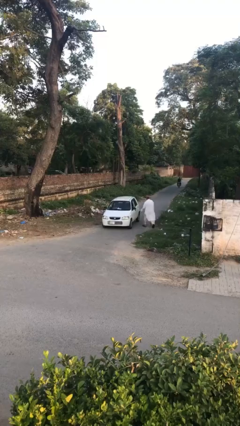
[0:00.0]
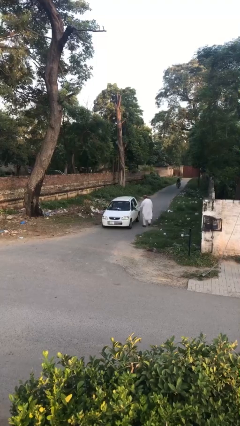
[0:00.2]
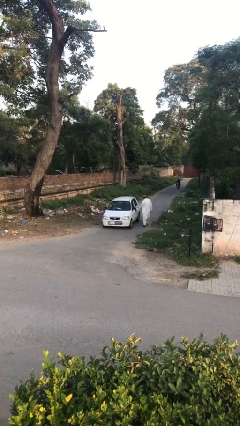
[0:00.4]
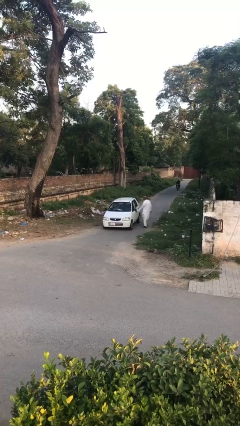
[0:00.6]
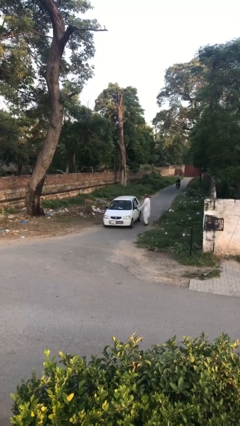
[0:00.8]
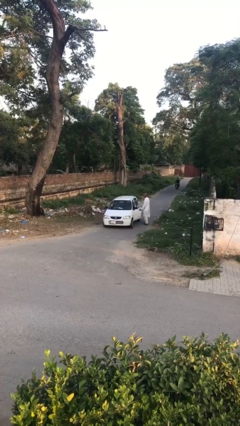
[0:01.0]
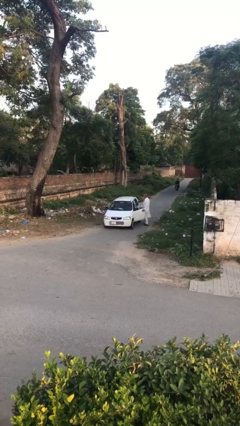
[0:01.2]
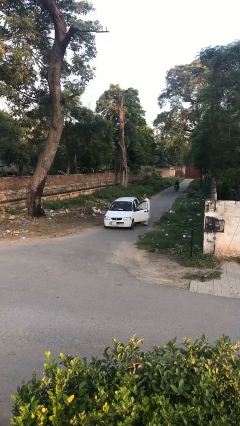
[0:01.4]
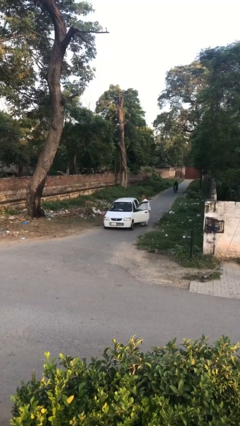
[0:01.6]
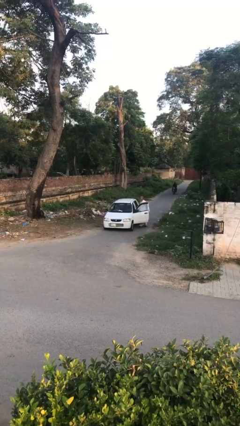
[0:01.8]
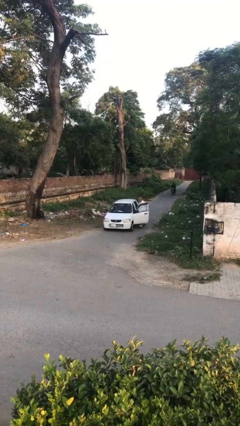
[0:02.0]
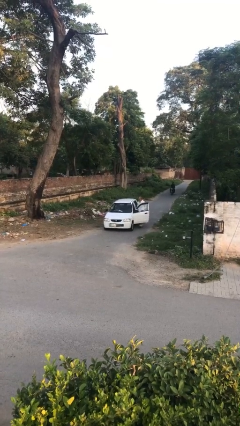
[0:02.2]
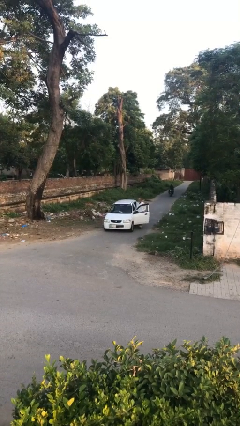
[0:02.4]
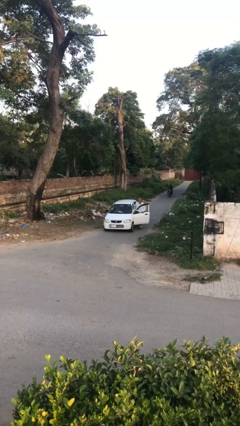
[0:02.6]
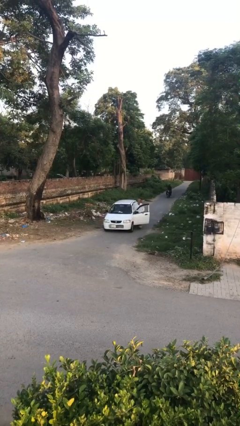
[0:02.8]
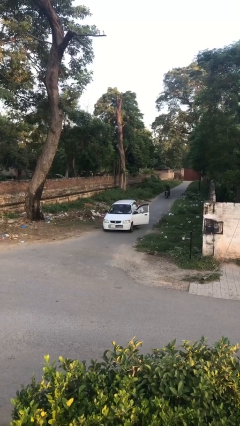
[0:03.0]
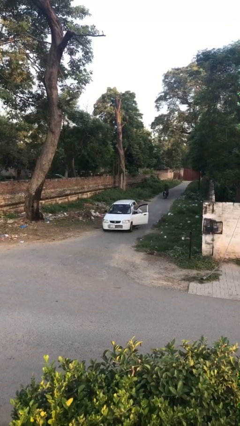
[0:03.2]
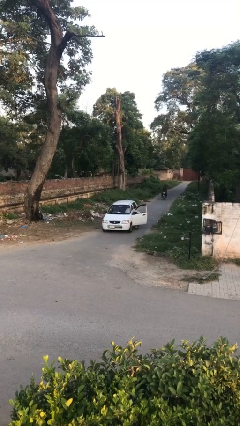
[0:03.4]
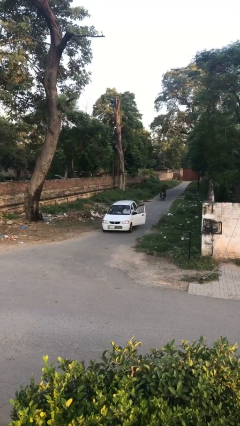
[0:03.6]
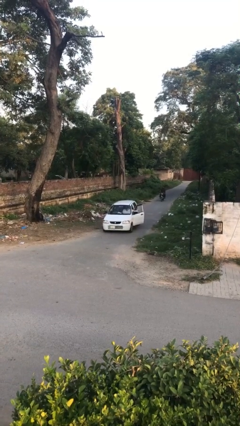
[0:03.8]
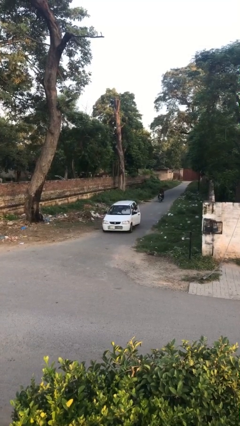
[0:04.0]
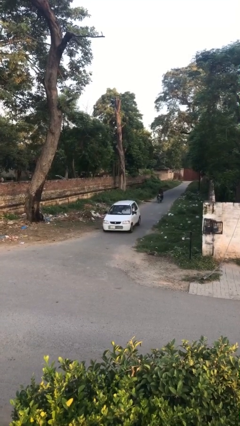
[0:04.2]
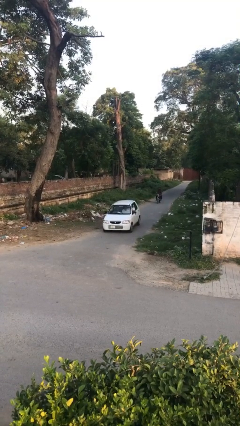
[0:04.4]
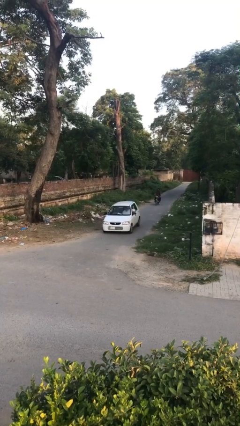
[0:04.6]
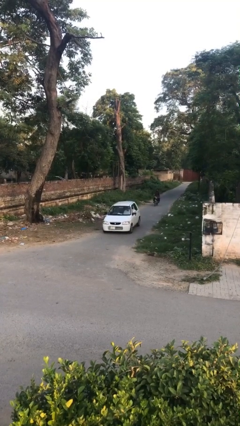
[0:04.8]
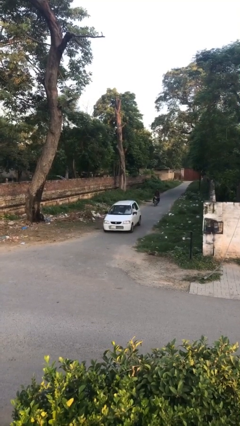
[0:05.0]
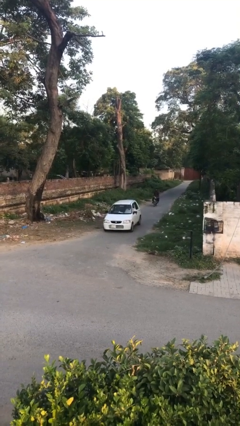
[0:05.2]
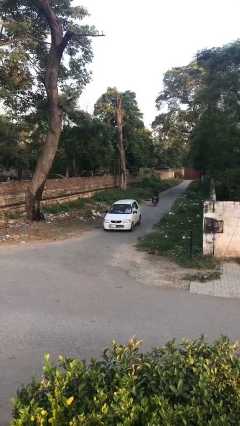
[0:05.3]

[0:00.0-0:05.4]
car picks up person

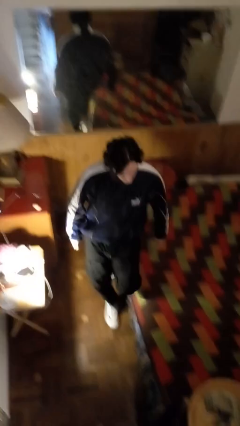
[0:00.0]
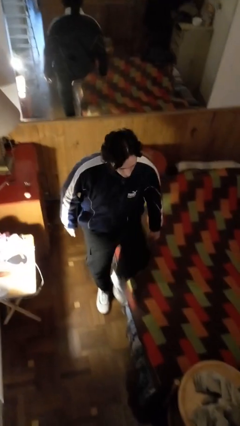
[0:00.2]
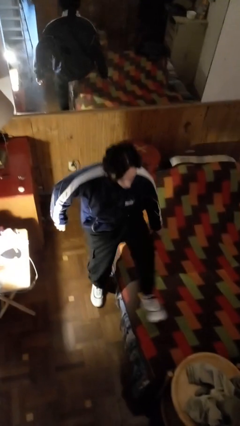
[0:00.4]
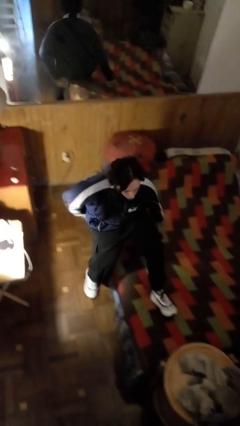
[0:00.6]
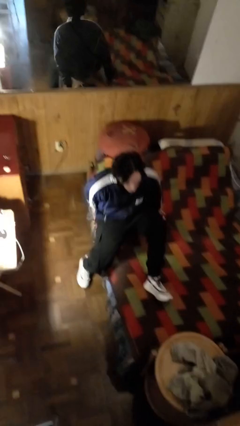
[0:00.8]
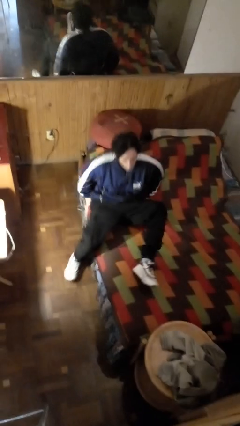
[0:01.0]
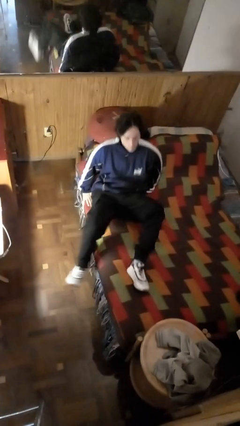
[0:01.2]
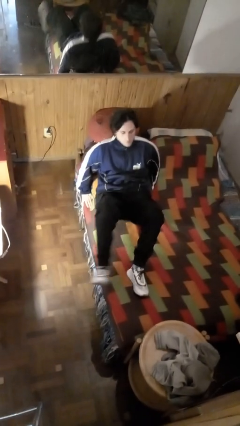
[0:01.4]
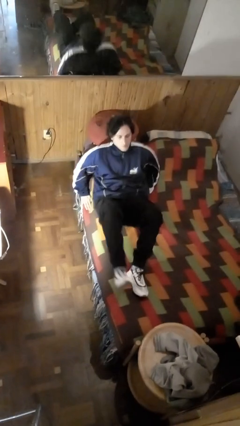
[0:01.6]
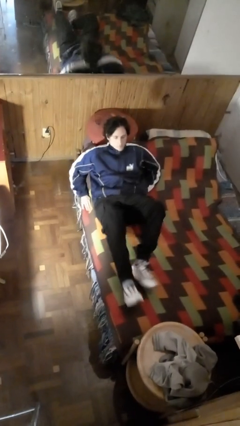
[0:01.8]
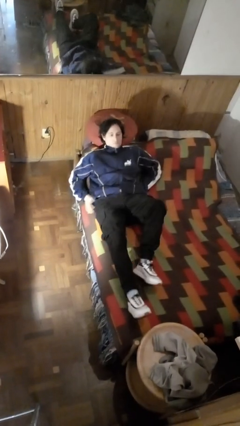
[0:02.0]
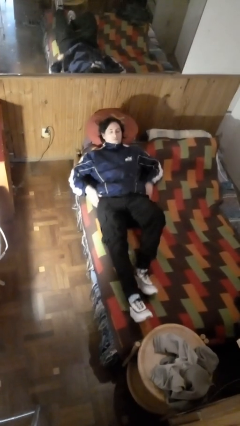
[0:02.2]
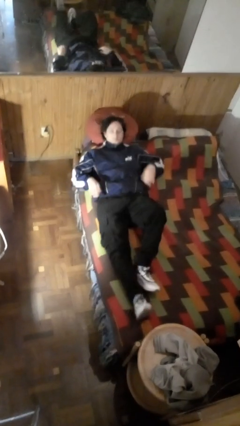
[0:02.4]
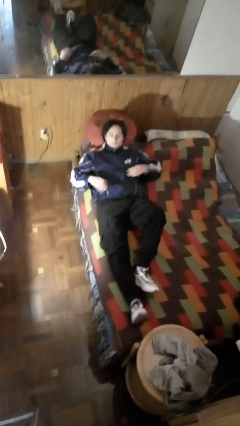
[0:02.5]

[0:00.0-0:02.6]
person lies down on bed

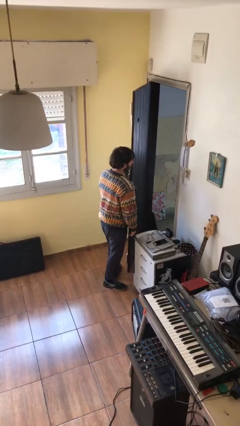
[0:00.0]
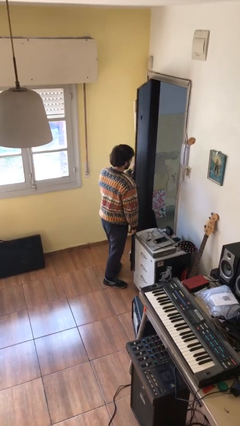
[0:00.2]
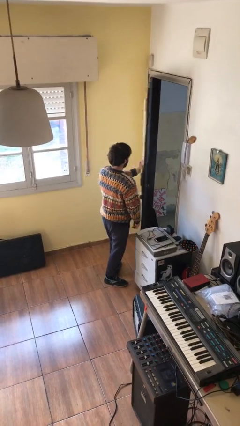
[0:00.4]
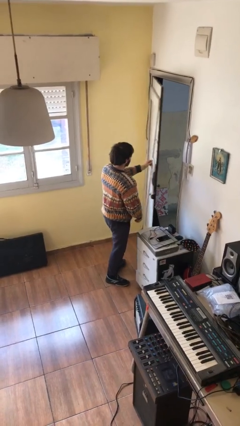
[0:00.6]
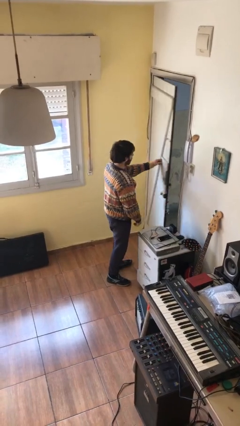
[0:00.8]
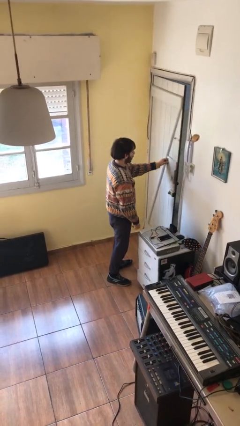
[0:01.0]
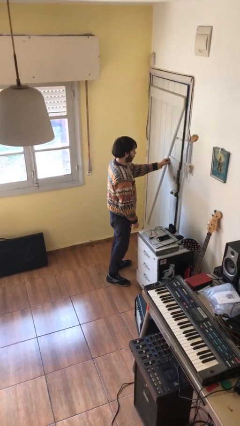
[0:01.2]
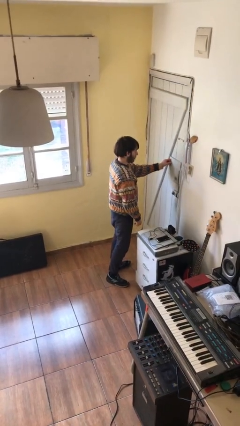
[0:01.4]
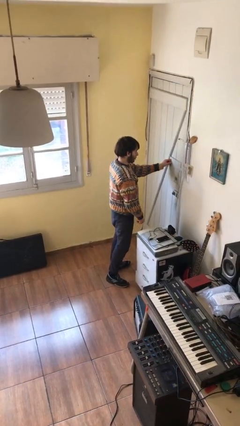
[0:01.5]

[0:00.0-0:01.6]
person closes facility door

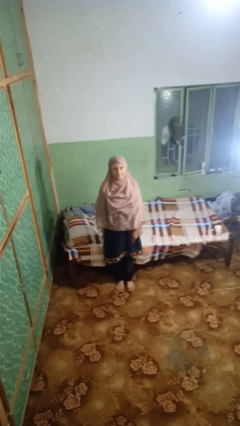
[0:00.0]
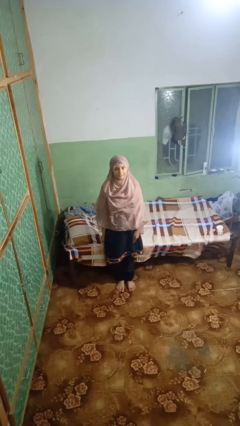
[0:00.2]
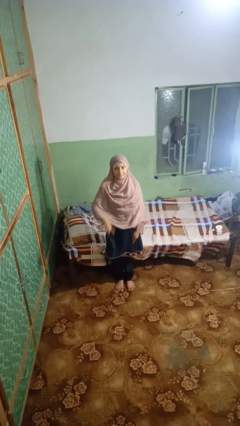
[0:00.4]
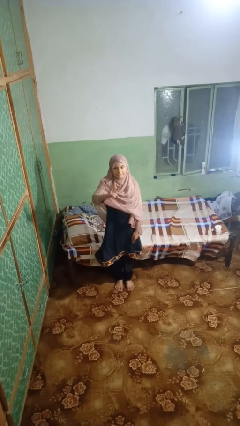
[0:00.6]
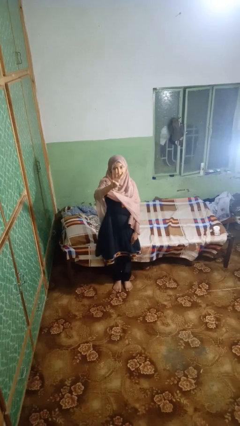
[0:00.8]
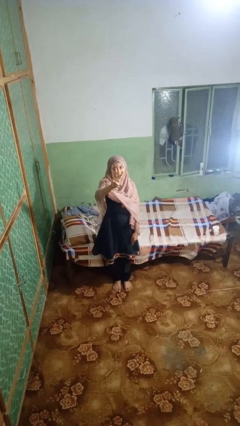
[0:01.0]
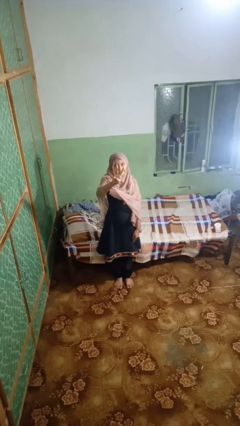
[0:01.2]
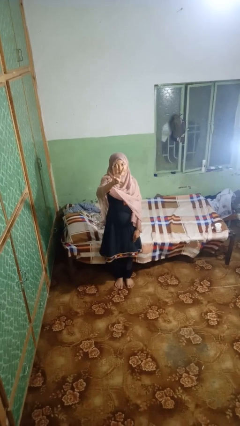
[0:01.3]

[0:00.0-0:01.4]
person gestures number four

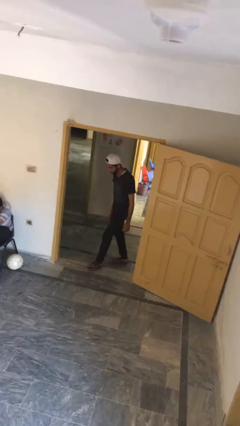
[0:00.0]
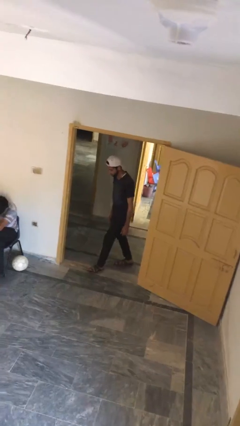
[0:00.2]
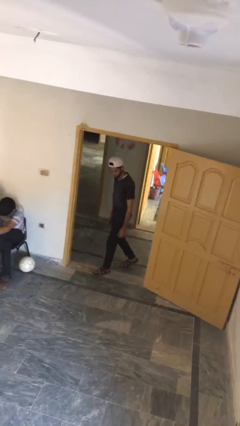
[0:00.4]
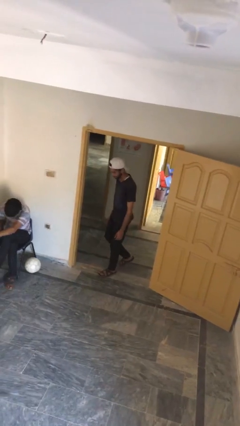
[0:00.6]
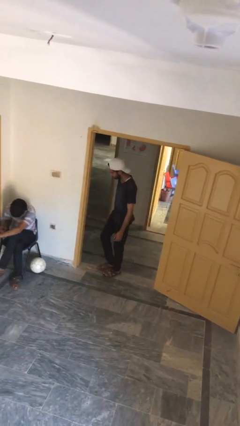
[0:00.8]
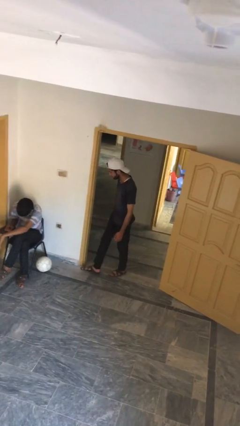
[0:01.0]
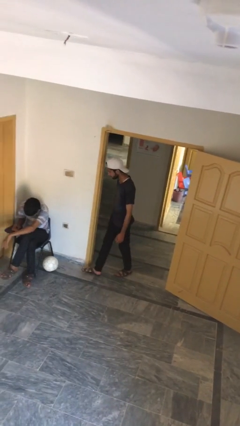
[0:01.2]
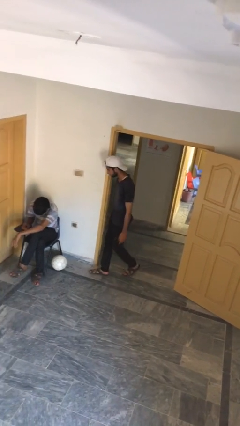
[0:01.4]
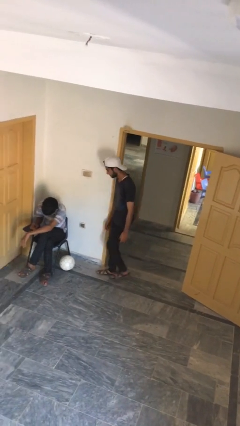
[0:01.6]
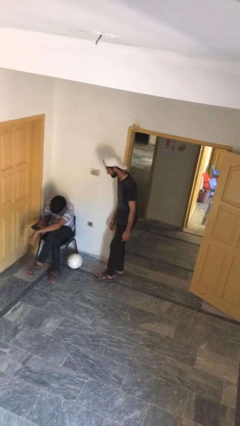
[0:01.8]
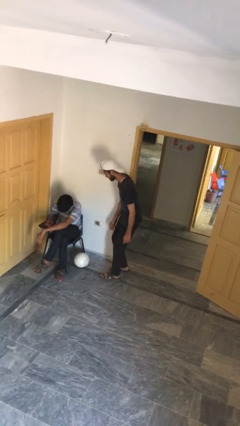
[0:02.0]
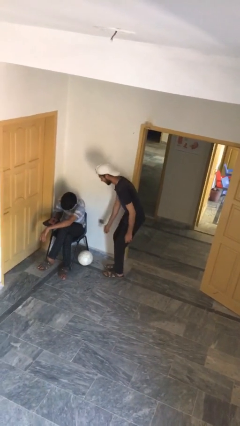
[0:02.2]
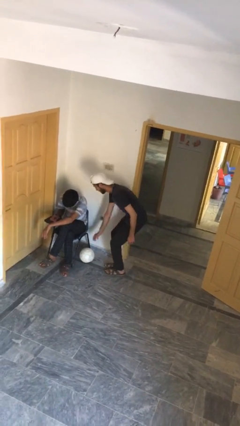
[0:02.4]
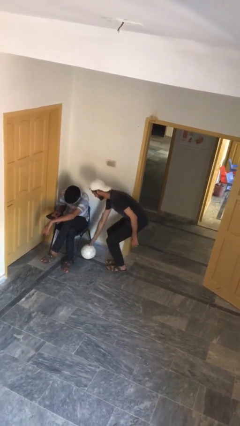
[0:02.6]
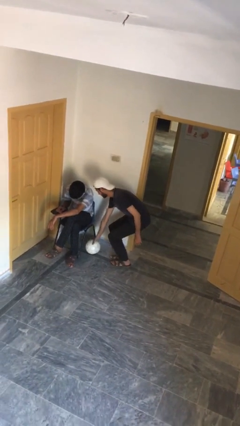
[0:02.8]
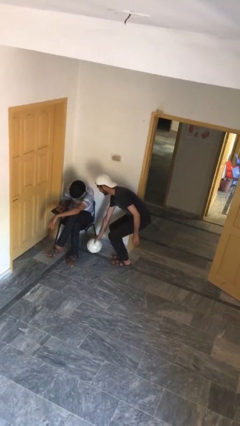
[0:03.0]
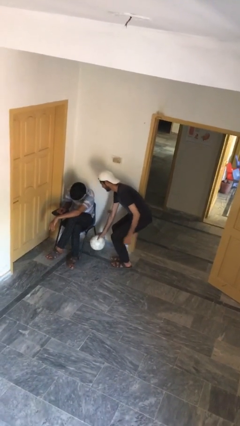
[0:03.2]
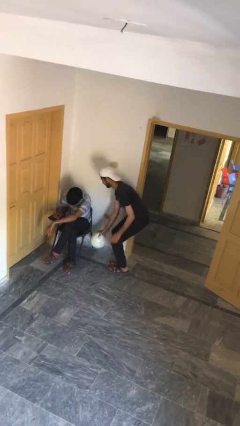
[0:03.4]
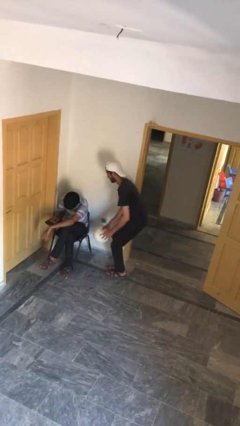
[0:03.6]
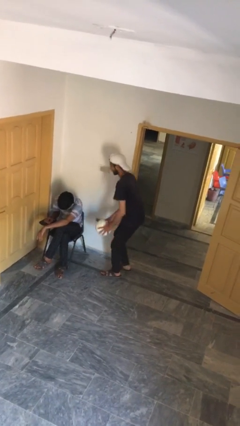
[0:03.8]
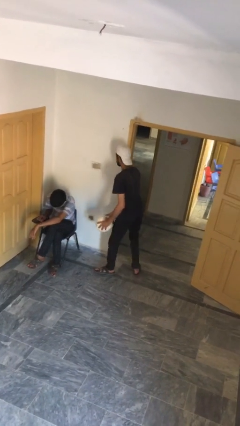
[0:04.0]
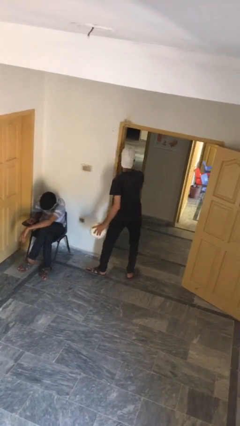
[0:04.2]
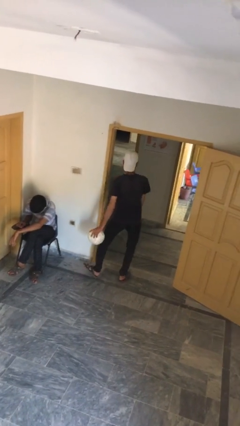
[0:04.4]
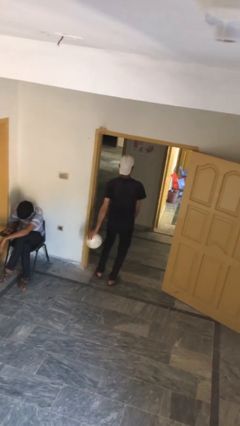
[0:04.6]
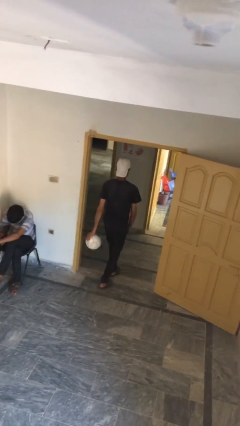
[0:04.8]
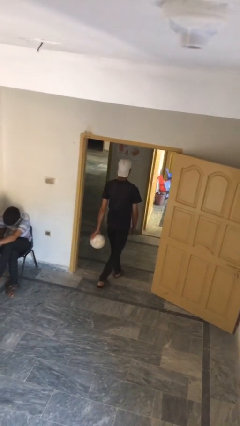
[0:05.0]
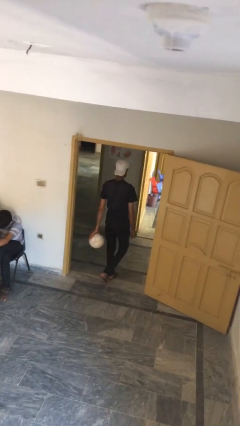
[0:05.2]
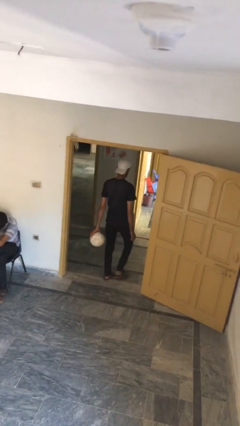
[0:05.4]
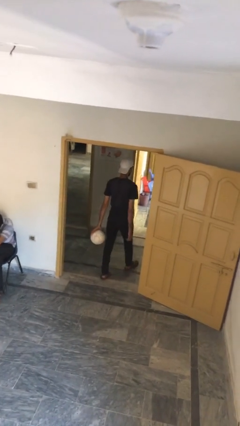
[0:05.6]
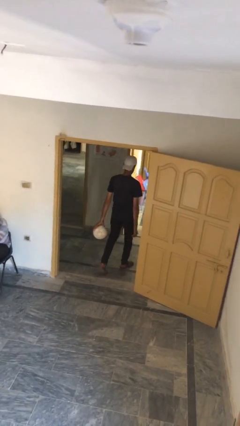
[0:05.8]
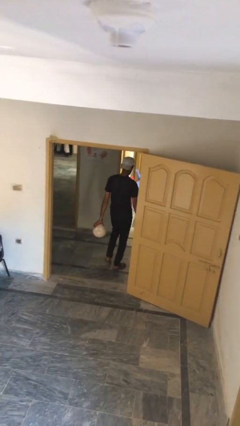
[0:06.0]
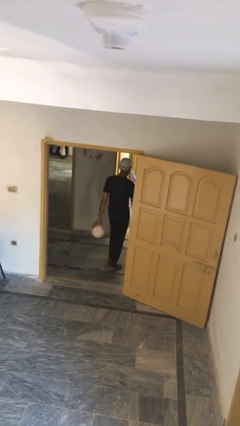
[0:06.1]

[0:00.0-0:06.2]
person steals object from person

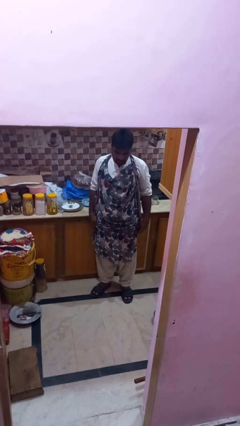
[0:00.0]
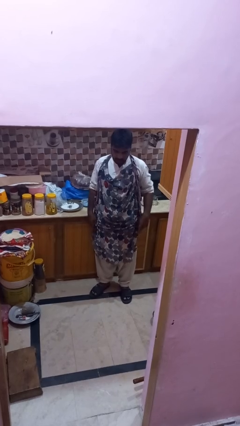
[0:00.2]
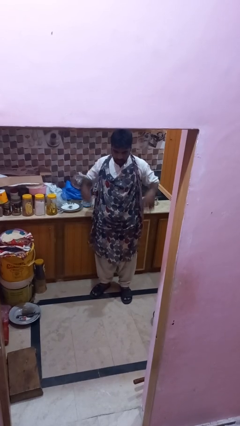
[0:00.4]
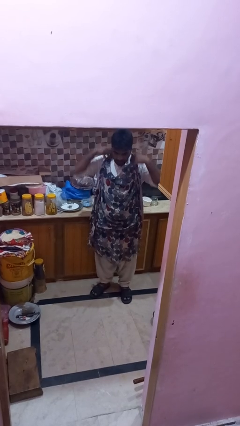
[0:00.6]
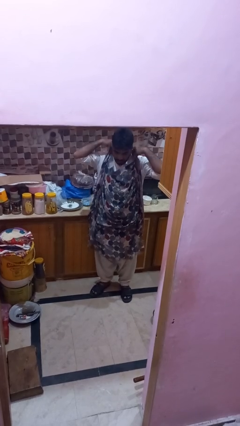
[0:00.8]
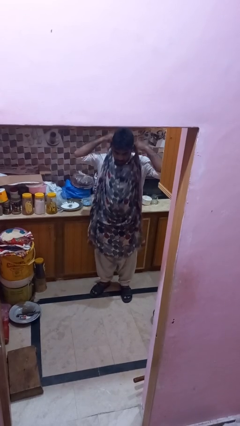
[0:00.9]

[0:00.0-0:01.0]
person takes off apron
